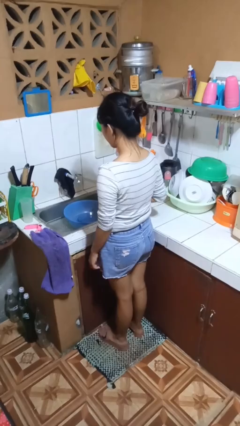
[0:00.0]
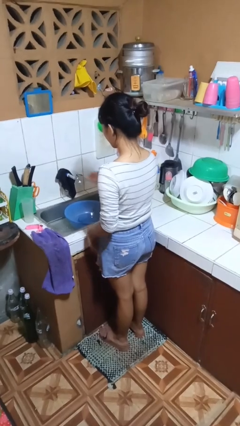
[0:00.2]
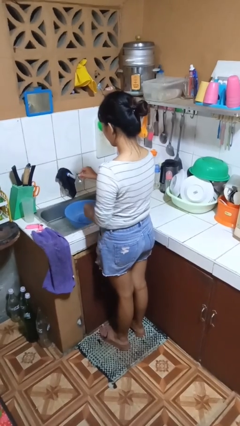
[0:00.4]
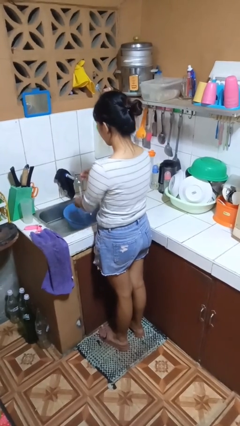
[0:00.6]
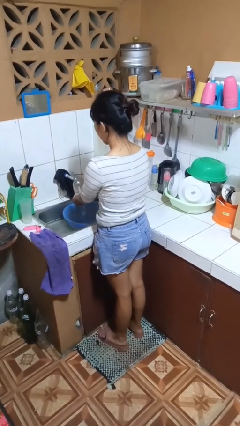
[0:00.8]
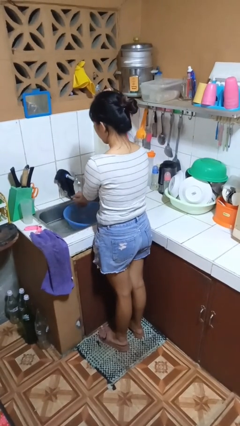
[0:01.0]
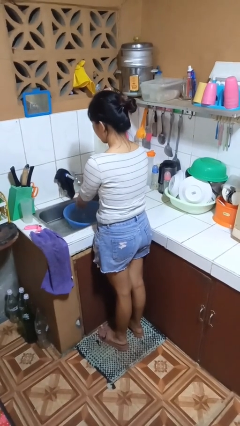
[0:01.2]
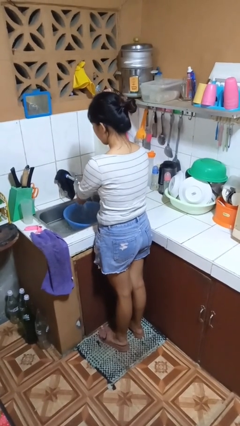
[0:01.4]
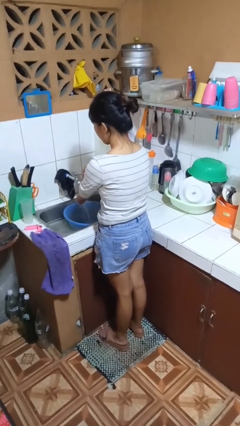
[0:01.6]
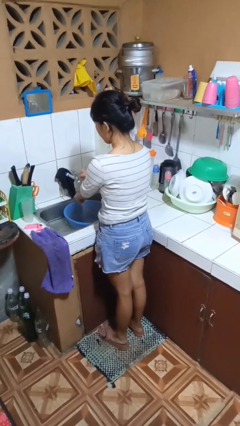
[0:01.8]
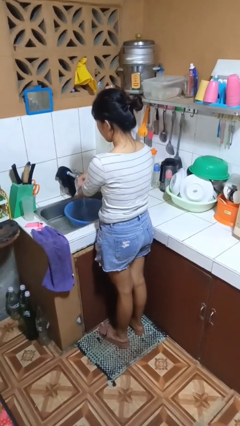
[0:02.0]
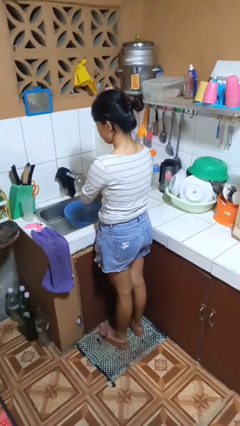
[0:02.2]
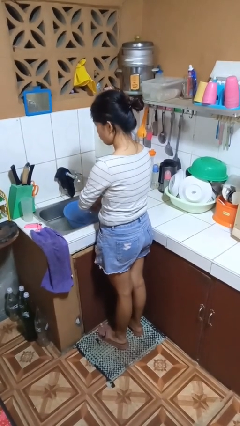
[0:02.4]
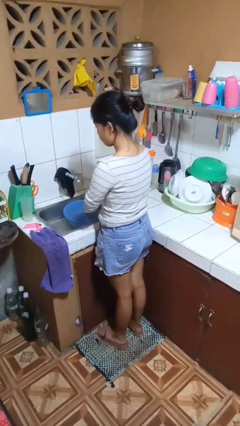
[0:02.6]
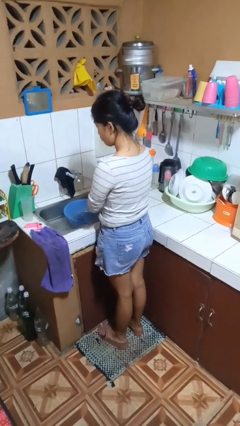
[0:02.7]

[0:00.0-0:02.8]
person washes hands

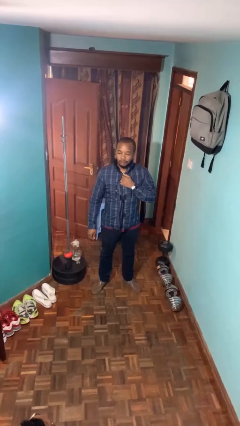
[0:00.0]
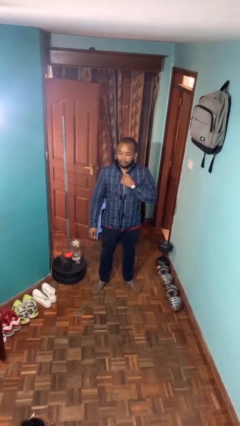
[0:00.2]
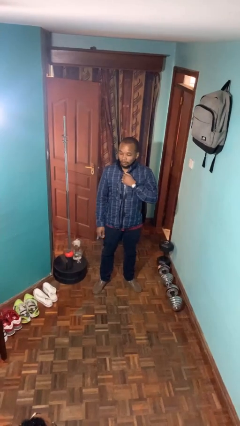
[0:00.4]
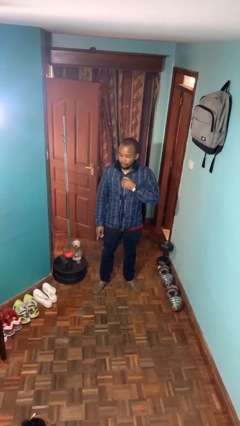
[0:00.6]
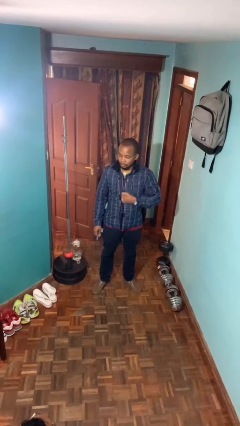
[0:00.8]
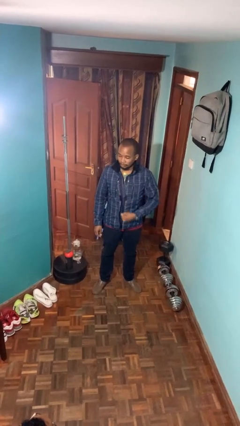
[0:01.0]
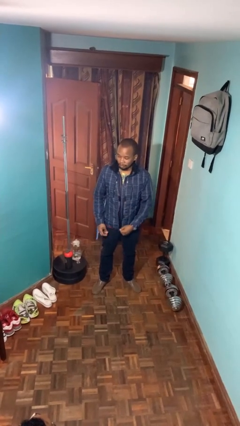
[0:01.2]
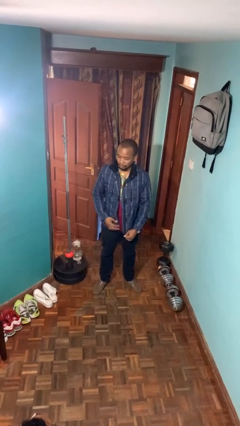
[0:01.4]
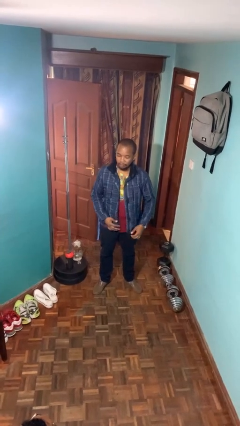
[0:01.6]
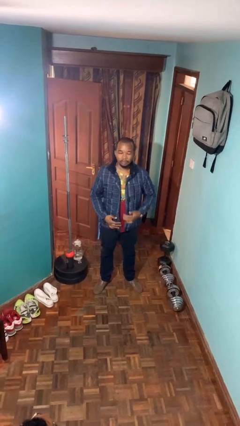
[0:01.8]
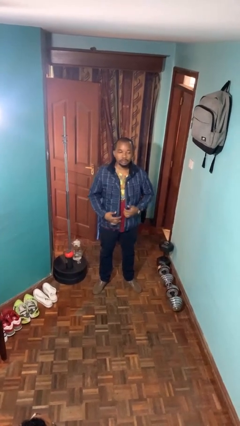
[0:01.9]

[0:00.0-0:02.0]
person unzips jacket

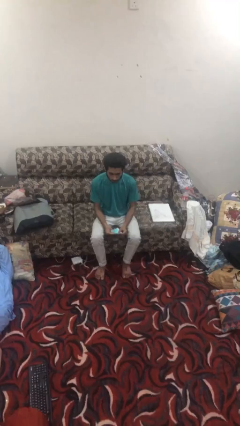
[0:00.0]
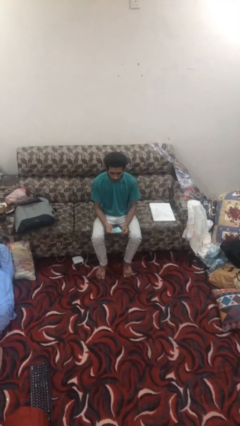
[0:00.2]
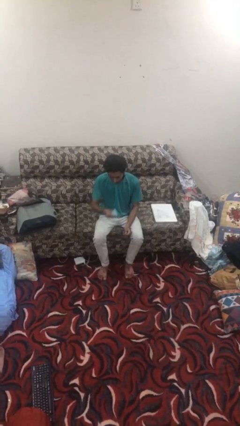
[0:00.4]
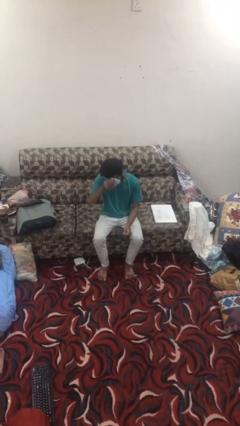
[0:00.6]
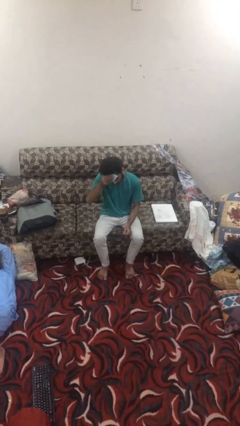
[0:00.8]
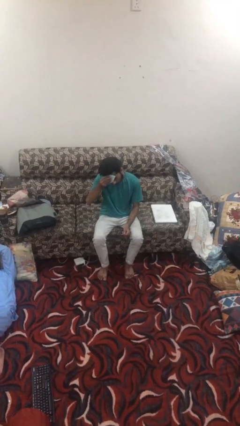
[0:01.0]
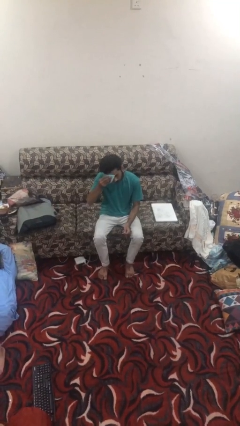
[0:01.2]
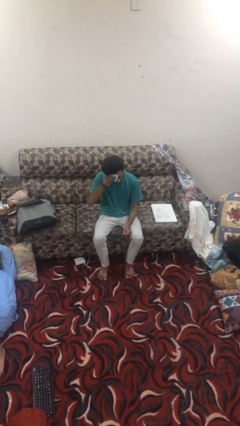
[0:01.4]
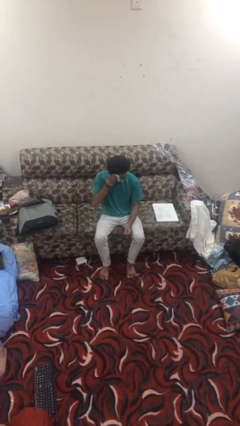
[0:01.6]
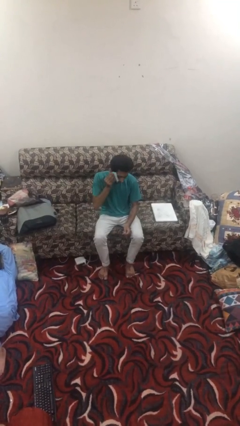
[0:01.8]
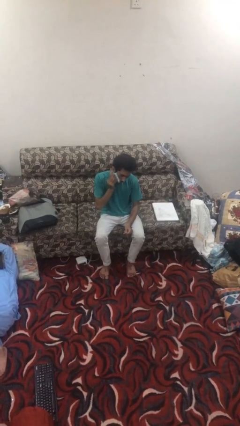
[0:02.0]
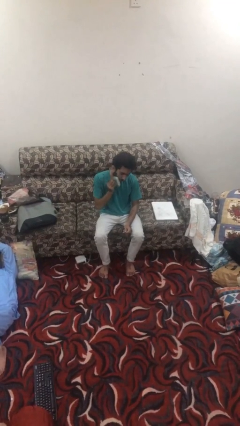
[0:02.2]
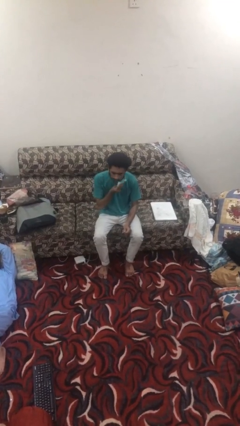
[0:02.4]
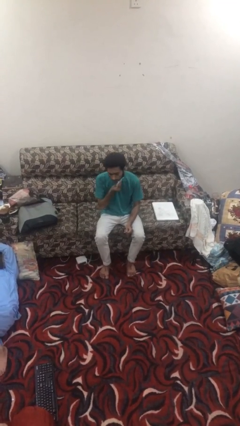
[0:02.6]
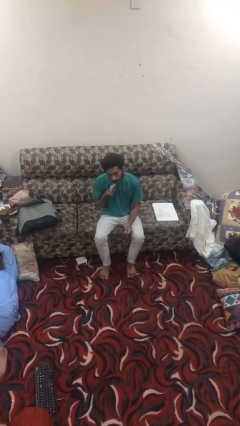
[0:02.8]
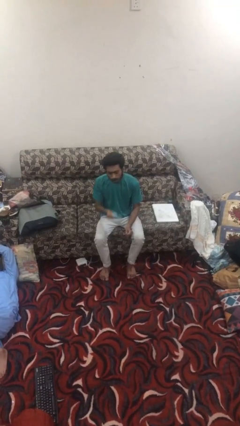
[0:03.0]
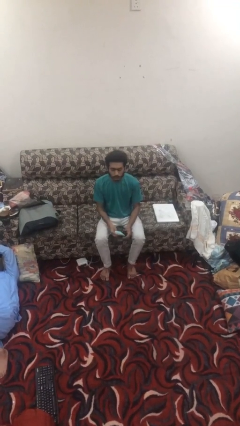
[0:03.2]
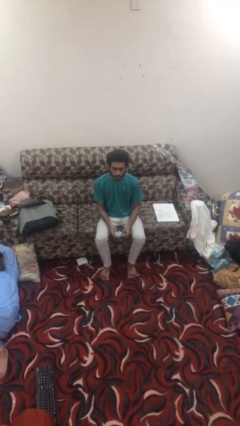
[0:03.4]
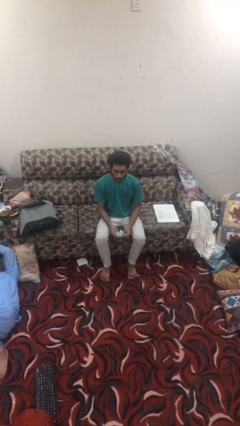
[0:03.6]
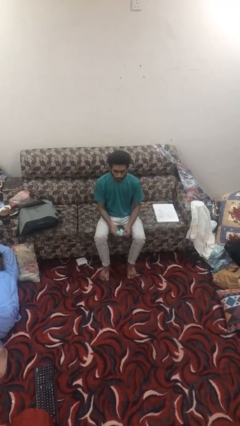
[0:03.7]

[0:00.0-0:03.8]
person wipes mouth with napkin

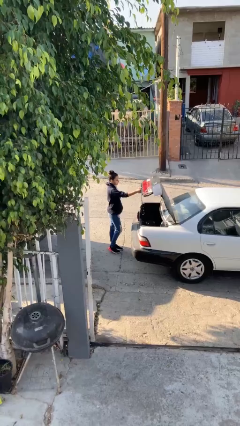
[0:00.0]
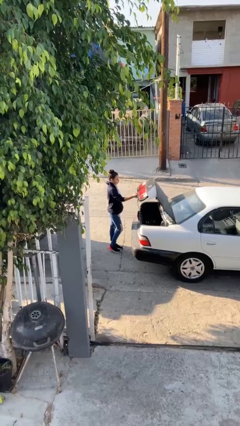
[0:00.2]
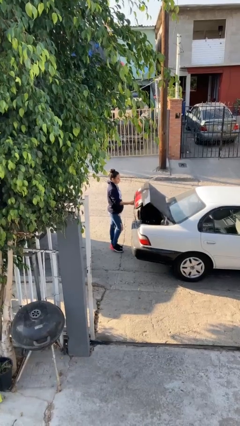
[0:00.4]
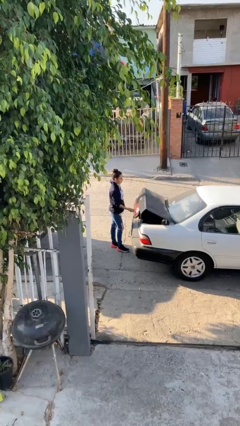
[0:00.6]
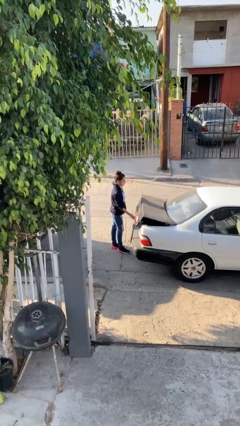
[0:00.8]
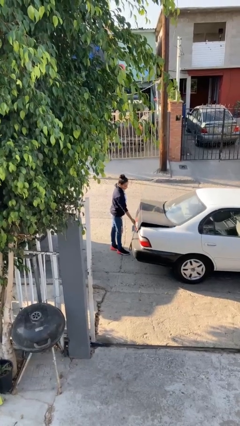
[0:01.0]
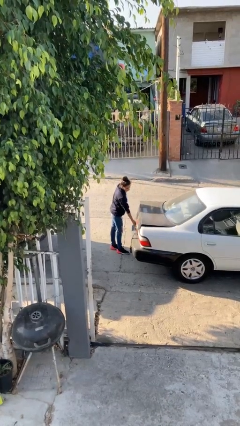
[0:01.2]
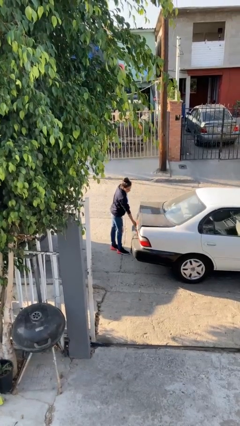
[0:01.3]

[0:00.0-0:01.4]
person closes car trunk

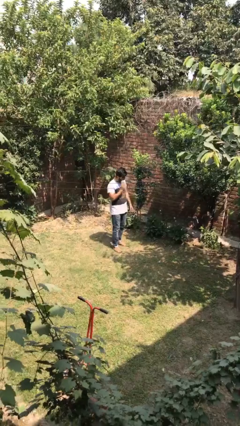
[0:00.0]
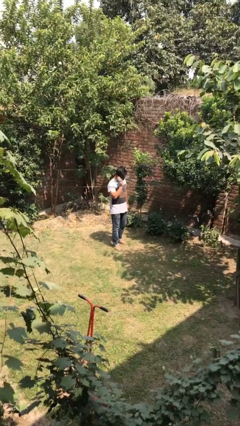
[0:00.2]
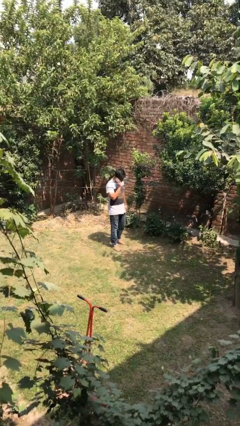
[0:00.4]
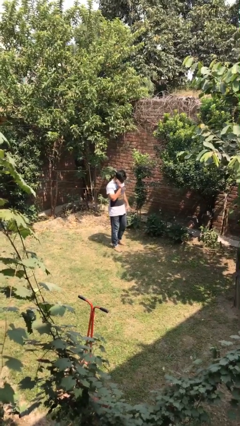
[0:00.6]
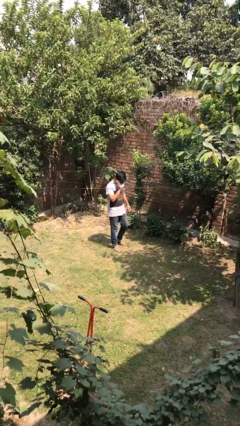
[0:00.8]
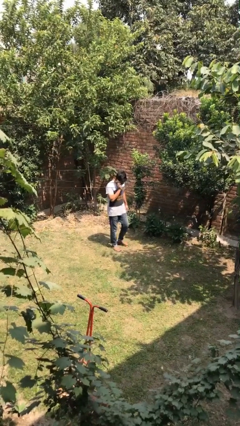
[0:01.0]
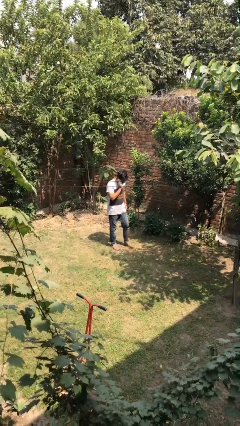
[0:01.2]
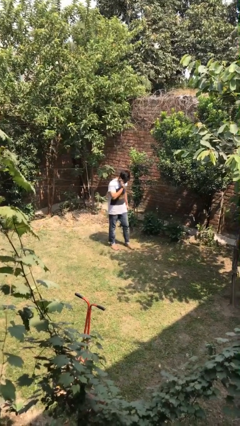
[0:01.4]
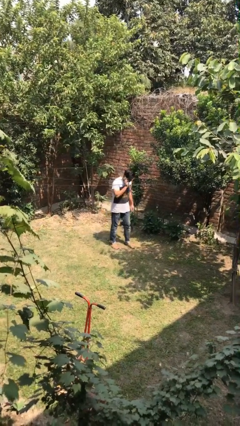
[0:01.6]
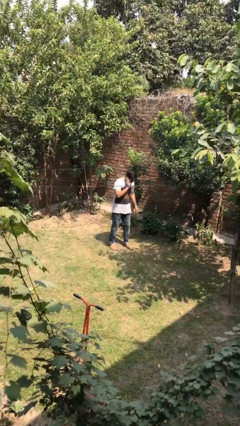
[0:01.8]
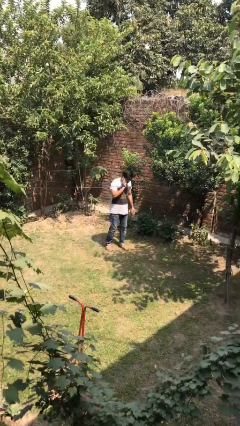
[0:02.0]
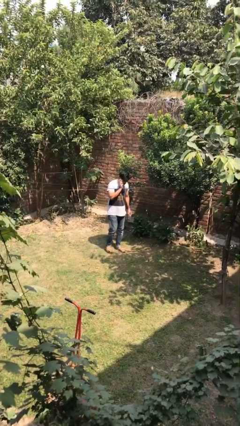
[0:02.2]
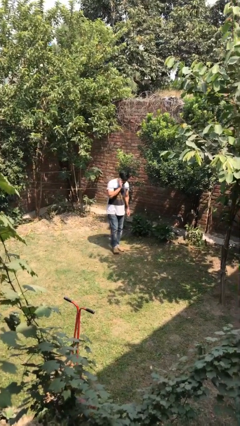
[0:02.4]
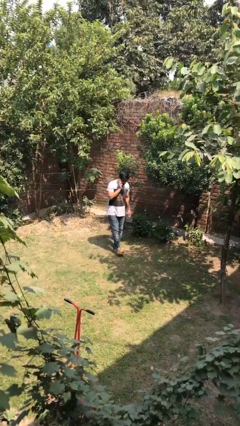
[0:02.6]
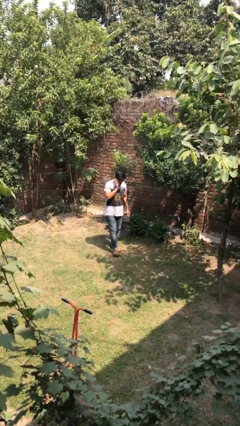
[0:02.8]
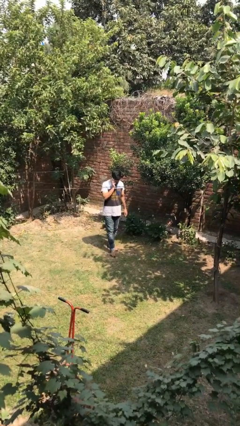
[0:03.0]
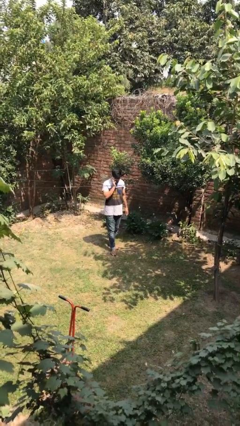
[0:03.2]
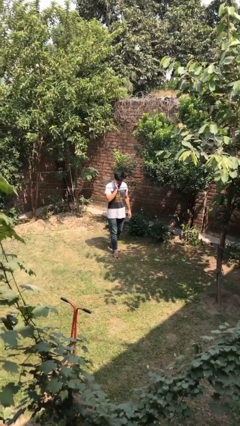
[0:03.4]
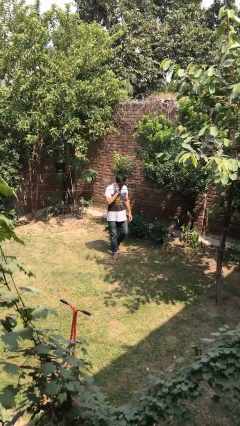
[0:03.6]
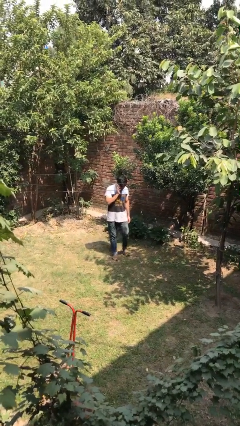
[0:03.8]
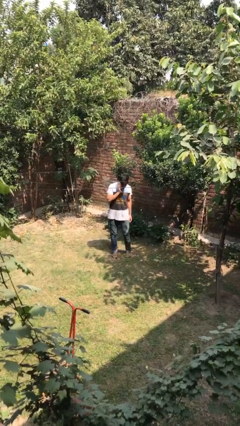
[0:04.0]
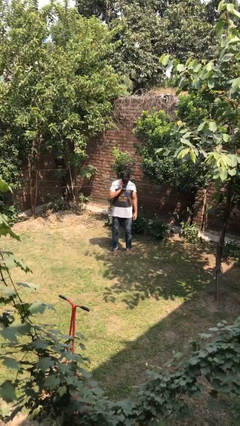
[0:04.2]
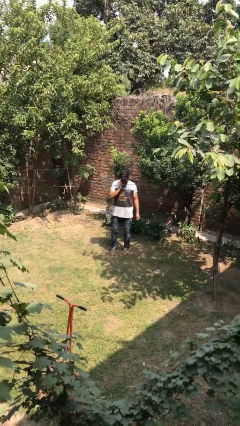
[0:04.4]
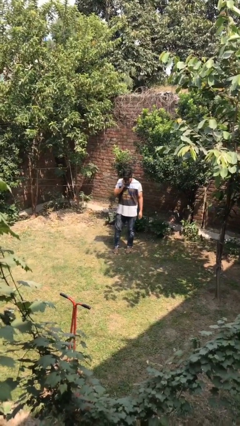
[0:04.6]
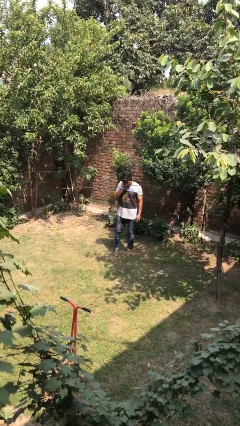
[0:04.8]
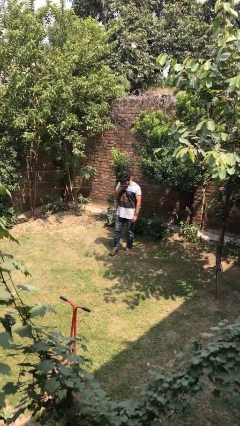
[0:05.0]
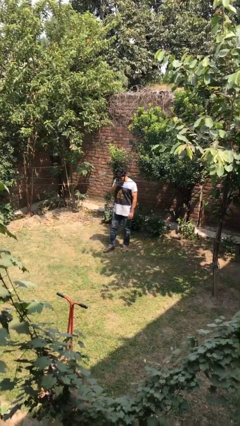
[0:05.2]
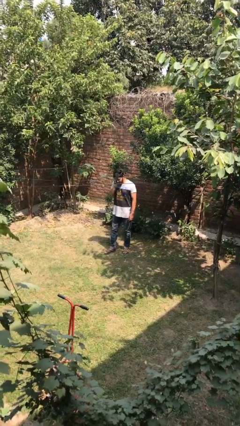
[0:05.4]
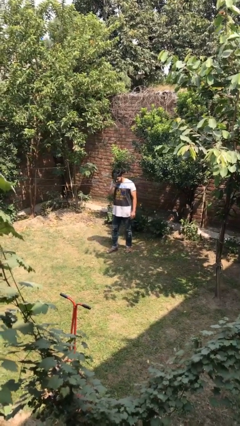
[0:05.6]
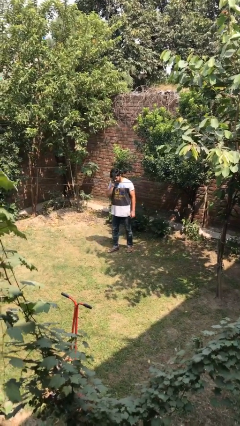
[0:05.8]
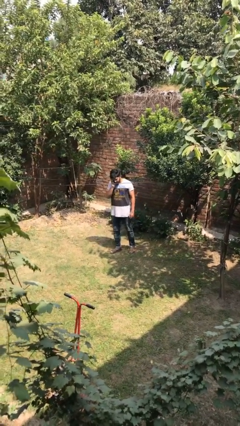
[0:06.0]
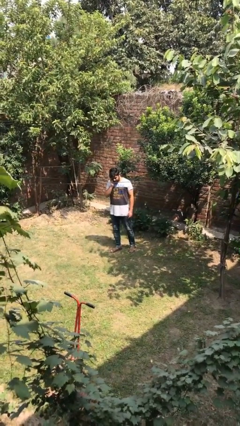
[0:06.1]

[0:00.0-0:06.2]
person talks on phone

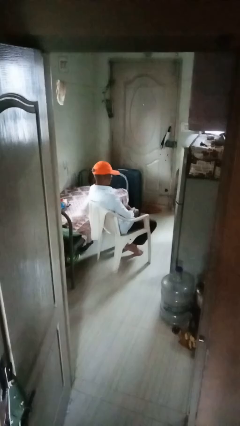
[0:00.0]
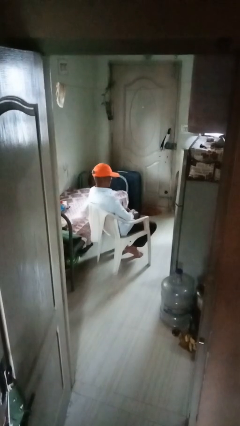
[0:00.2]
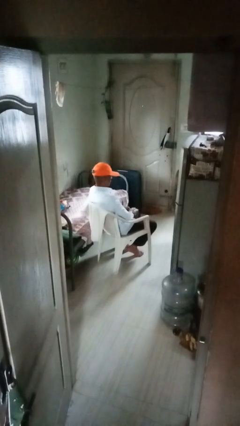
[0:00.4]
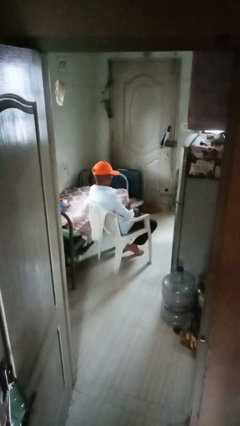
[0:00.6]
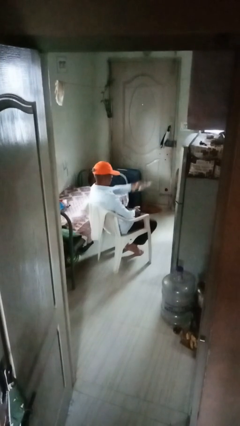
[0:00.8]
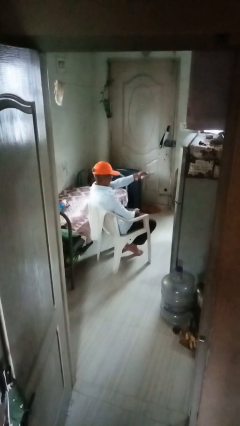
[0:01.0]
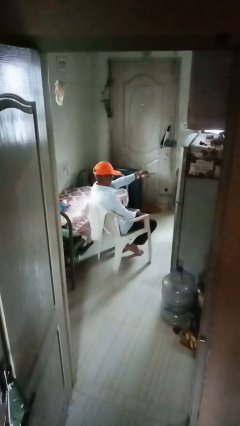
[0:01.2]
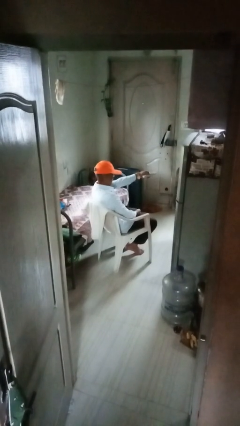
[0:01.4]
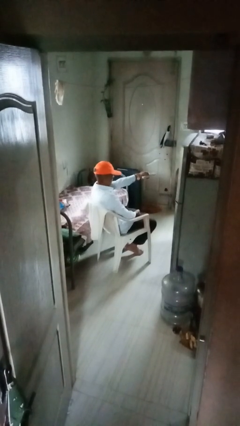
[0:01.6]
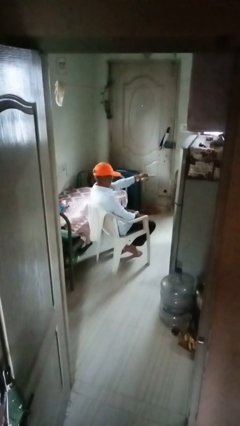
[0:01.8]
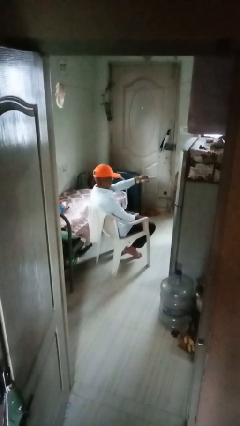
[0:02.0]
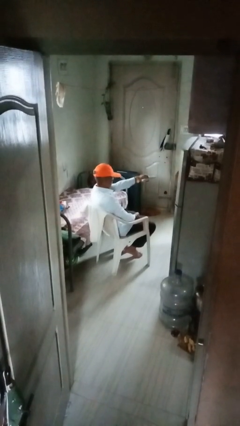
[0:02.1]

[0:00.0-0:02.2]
person uses television remote
